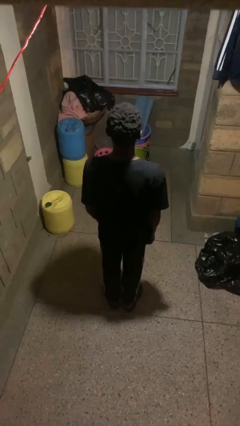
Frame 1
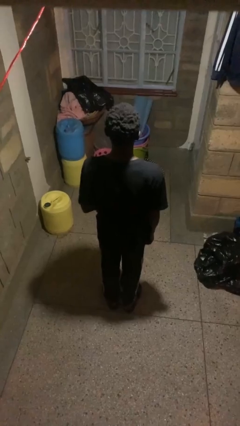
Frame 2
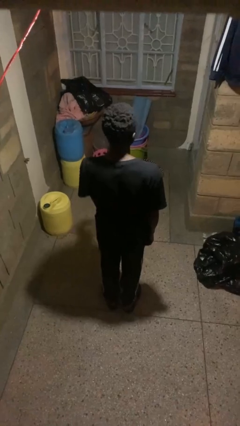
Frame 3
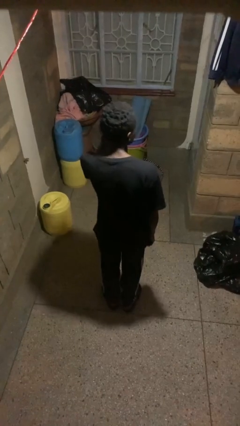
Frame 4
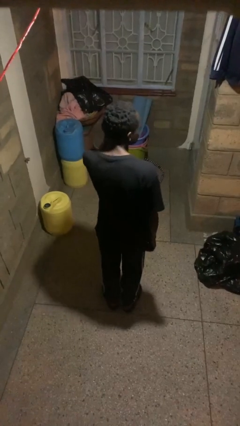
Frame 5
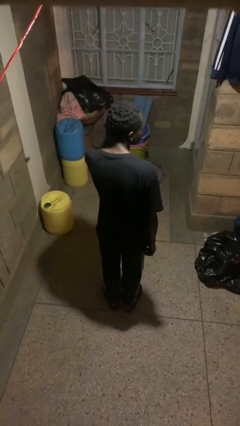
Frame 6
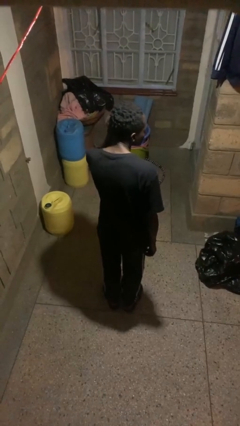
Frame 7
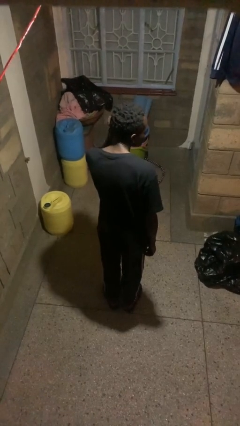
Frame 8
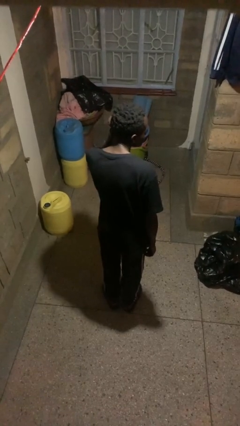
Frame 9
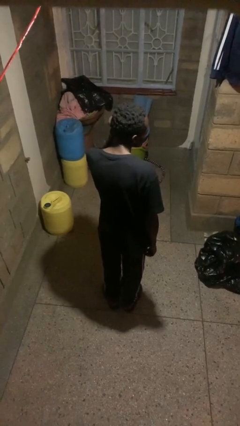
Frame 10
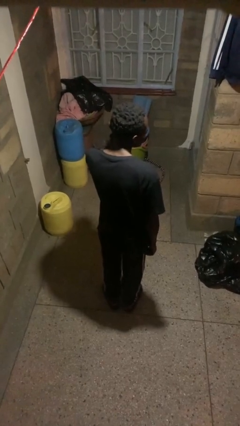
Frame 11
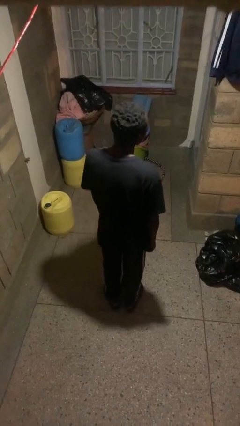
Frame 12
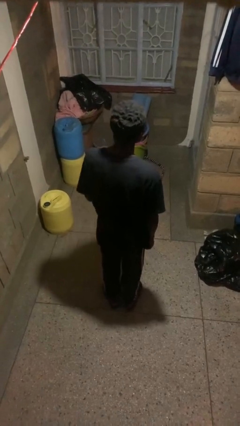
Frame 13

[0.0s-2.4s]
person touches earlobe

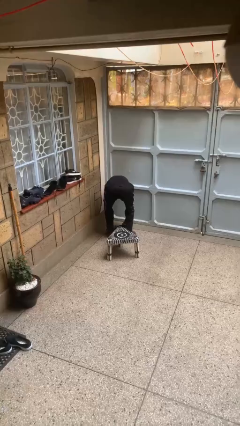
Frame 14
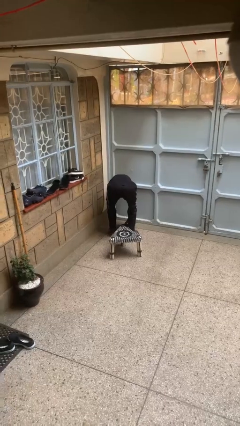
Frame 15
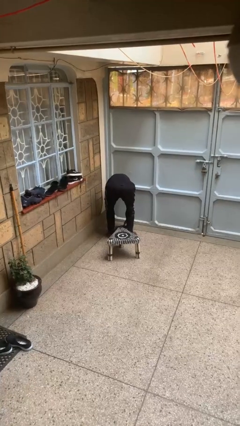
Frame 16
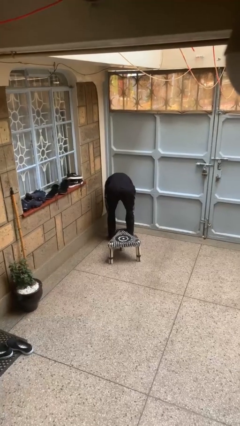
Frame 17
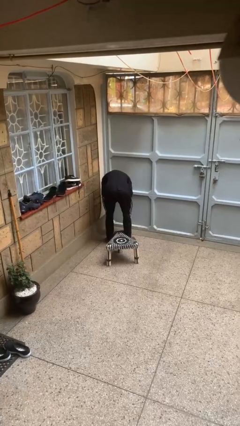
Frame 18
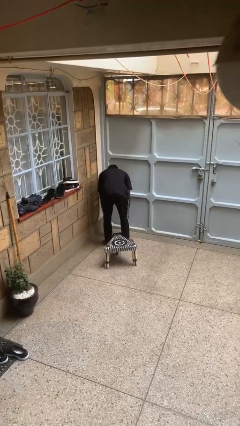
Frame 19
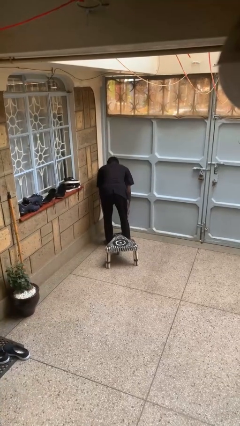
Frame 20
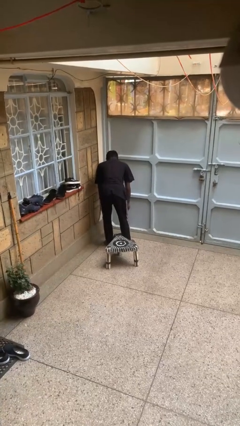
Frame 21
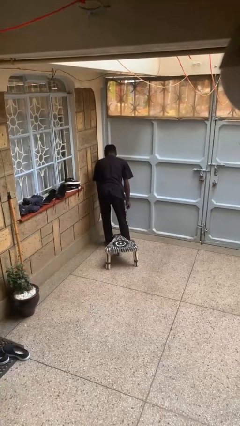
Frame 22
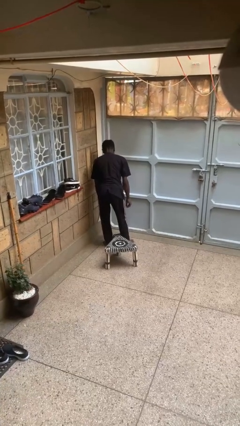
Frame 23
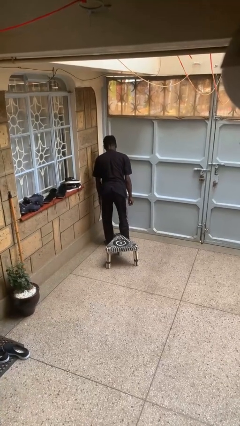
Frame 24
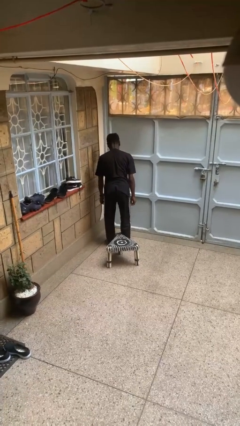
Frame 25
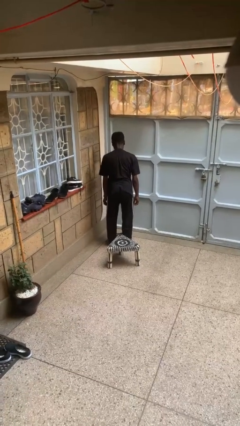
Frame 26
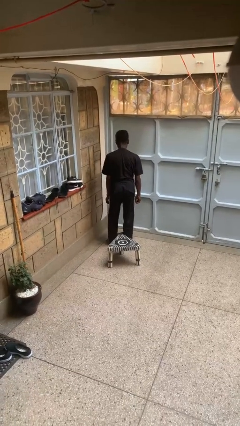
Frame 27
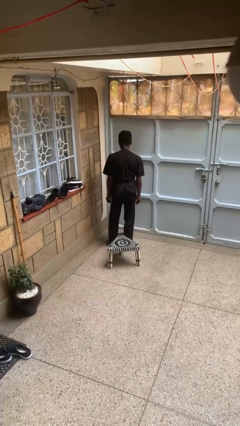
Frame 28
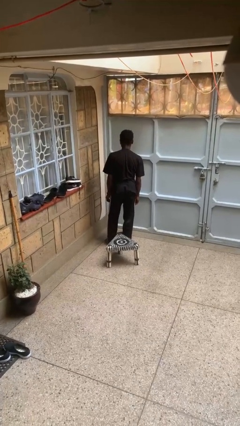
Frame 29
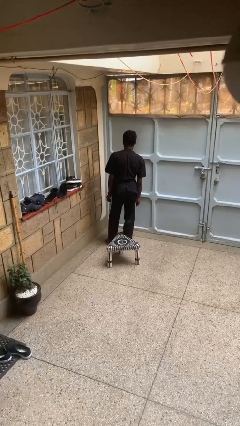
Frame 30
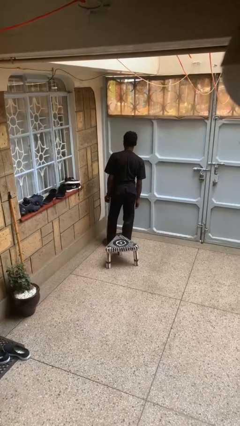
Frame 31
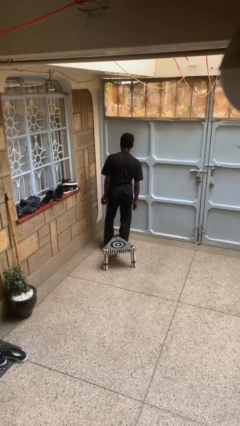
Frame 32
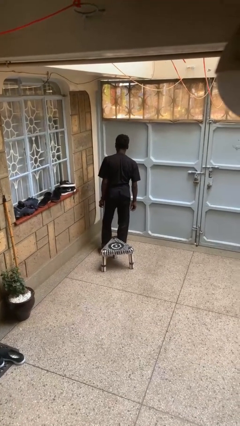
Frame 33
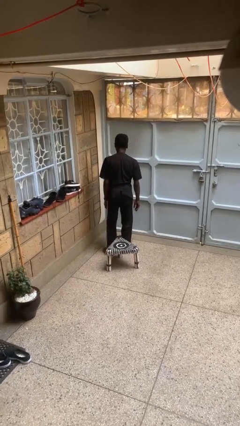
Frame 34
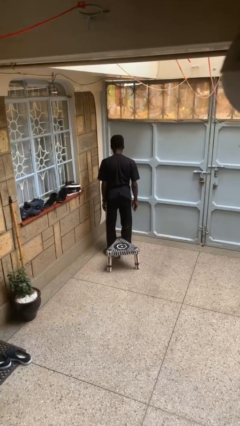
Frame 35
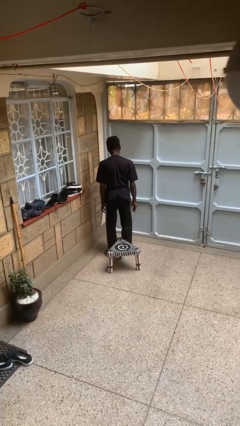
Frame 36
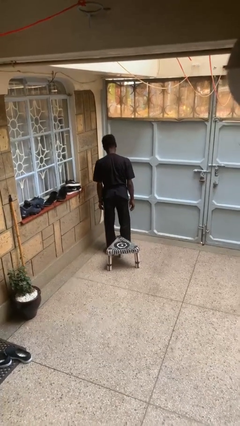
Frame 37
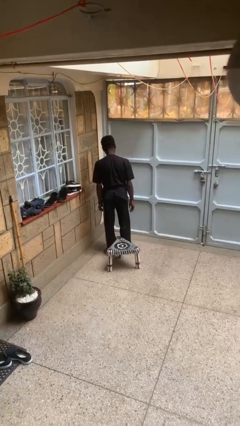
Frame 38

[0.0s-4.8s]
person stands up from floor

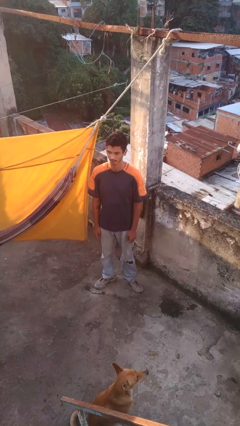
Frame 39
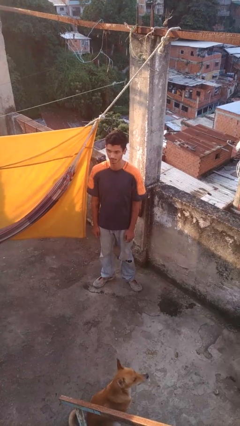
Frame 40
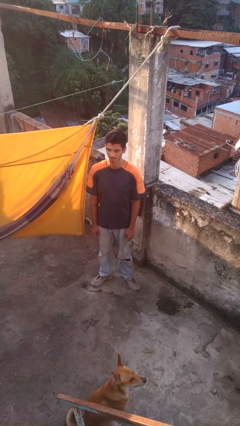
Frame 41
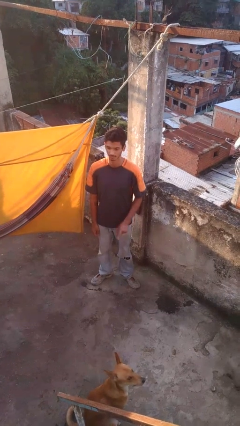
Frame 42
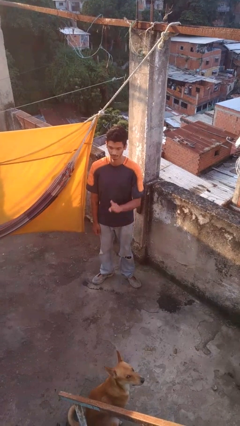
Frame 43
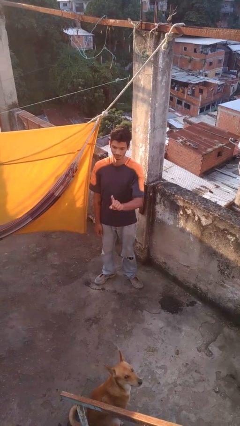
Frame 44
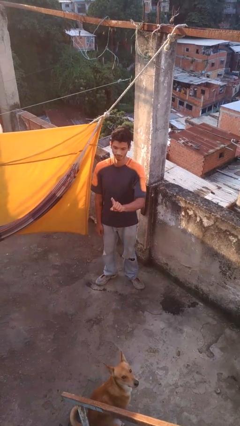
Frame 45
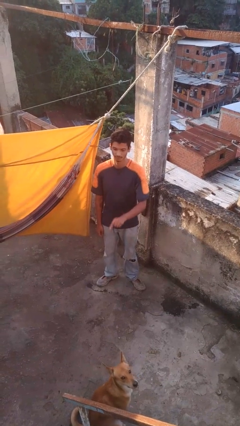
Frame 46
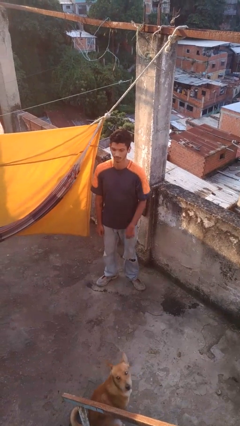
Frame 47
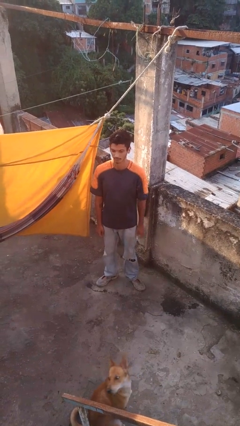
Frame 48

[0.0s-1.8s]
person gestures number one

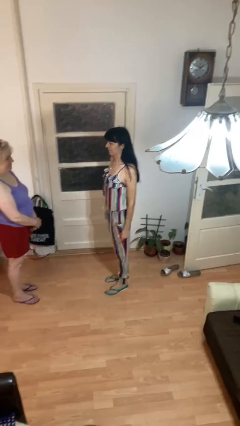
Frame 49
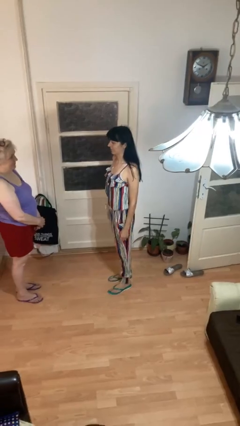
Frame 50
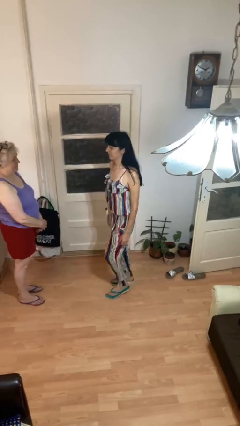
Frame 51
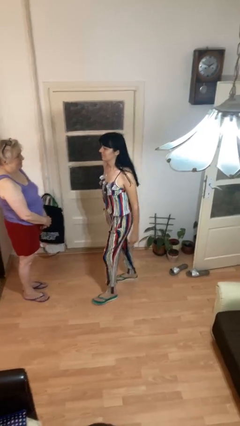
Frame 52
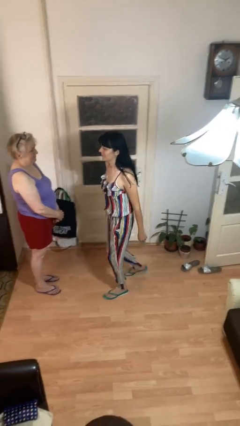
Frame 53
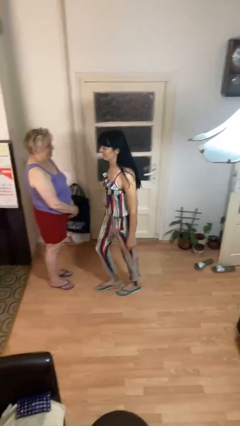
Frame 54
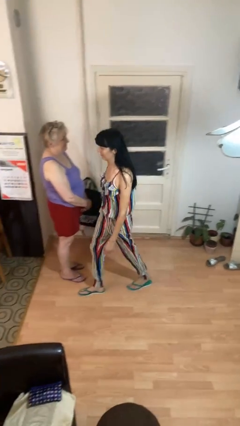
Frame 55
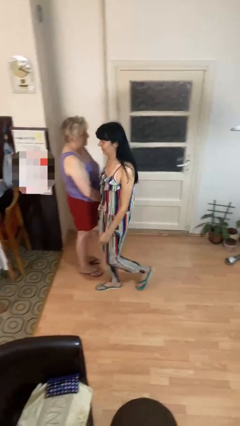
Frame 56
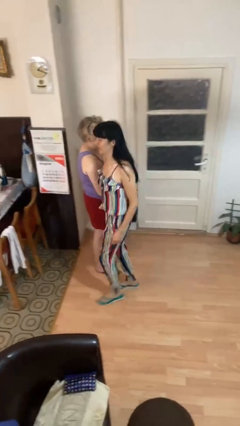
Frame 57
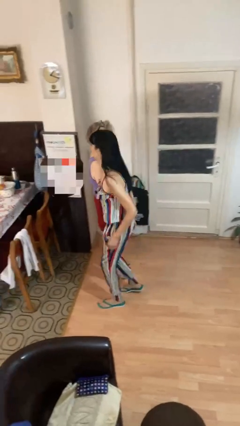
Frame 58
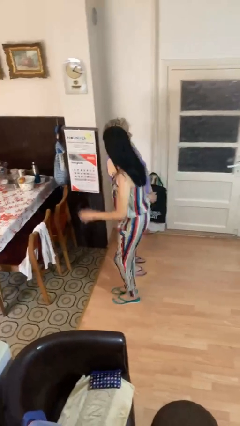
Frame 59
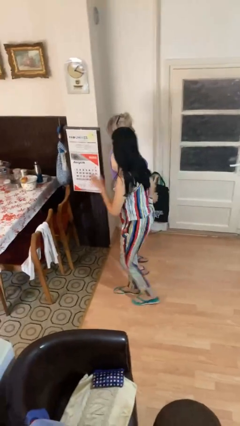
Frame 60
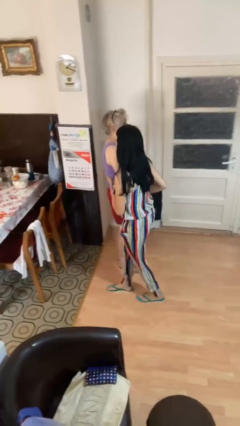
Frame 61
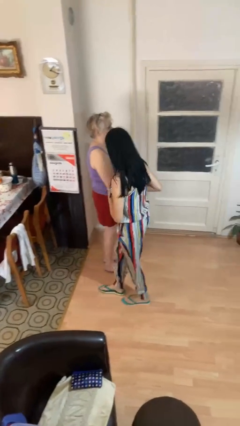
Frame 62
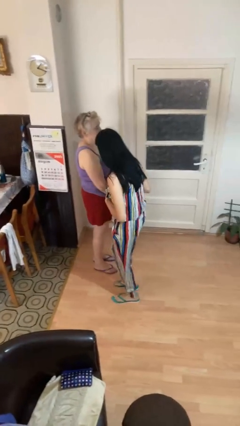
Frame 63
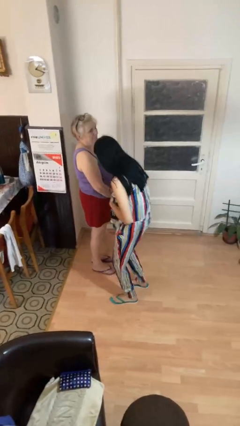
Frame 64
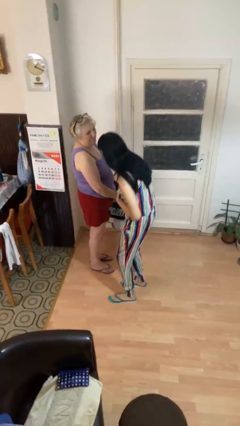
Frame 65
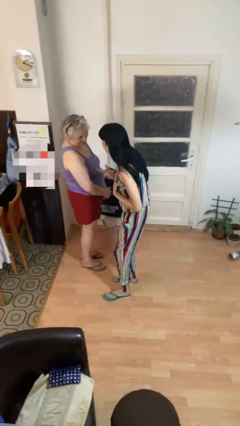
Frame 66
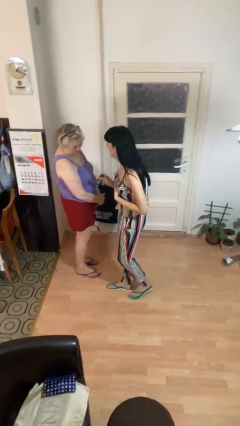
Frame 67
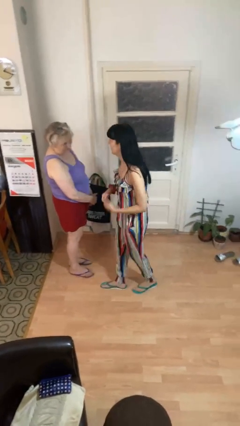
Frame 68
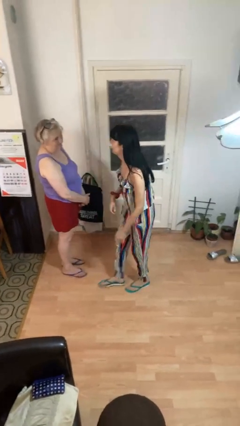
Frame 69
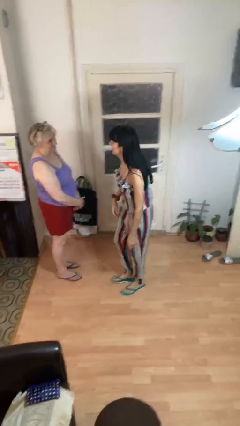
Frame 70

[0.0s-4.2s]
person bumps into person

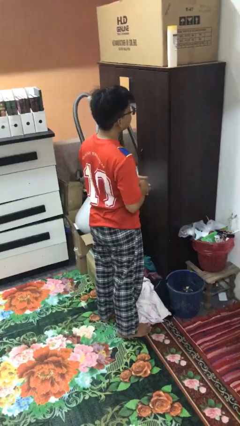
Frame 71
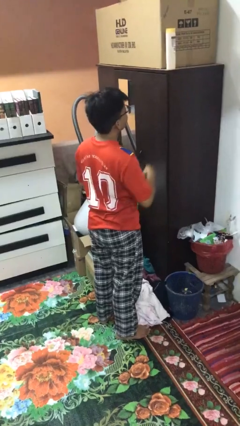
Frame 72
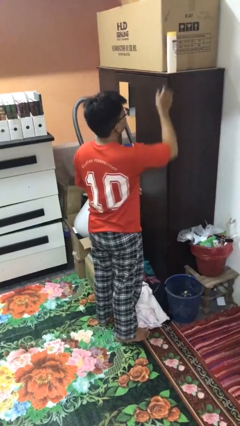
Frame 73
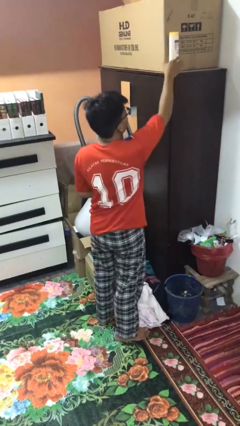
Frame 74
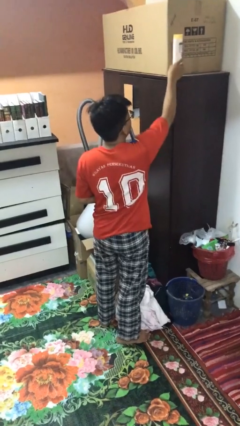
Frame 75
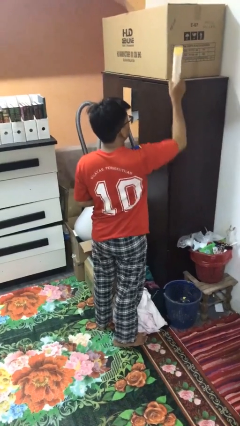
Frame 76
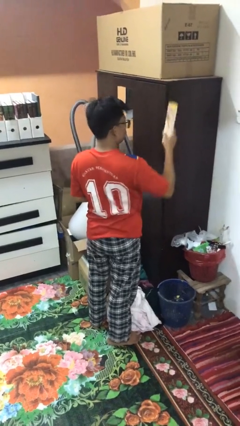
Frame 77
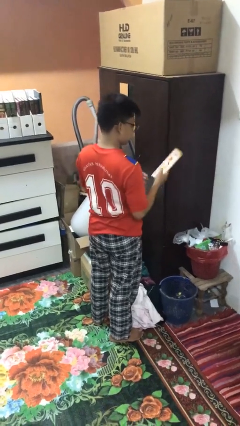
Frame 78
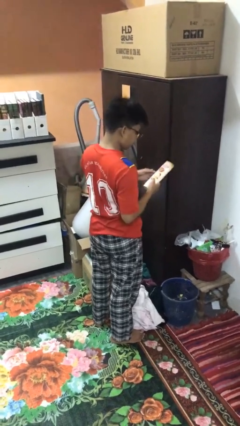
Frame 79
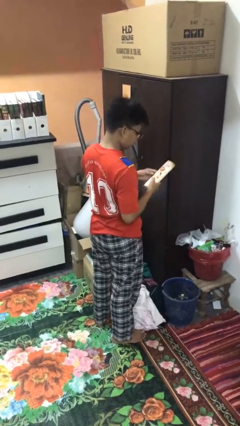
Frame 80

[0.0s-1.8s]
person picks up object from shelf

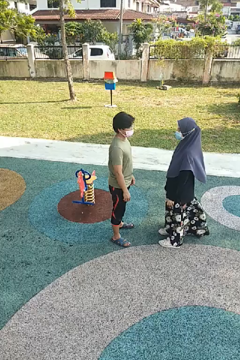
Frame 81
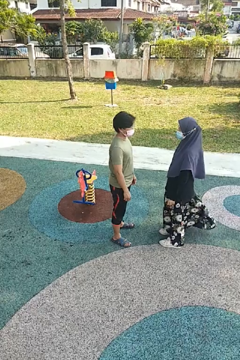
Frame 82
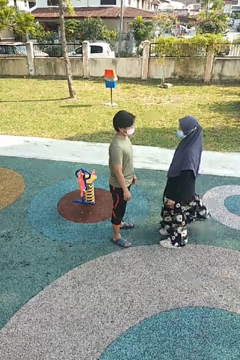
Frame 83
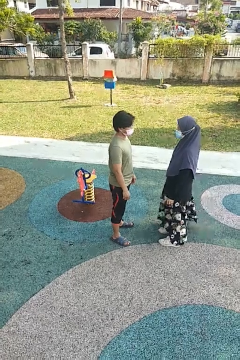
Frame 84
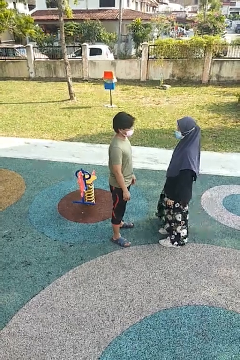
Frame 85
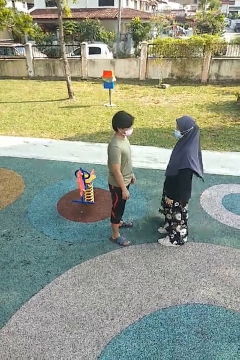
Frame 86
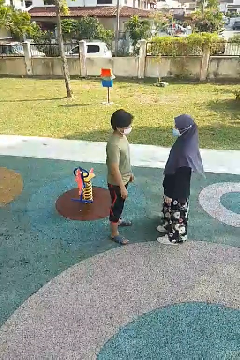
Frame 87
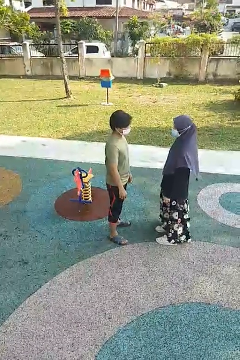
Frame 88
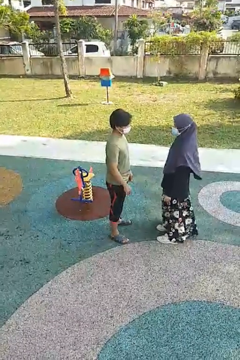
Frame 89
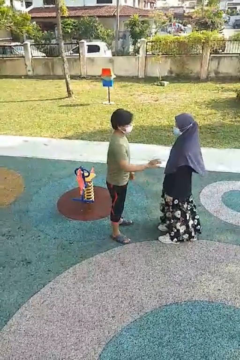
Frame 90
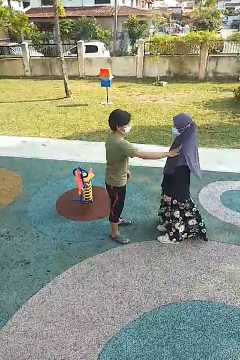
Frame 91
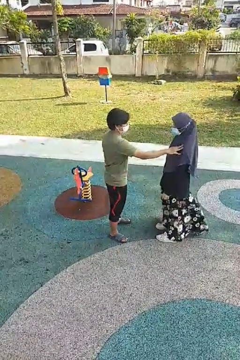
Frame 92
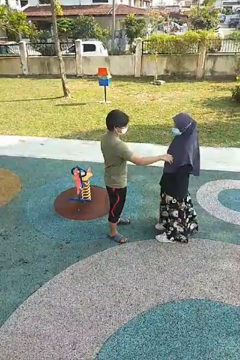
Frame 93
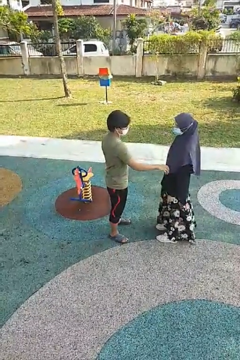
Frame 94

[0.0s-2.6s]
person shoves person

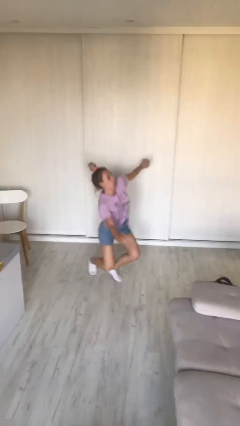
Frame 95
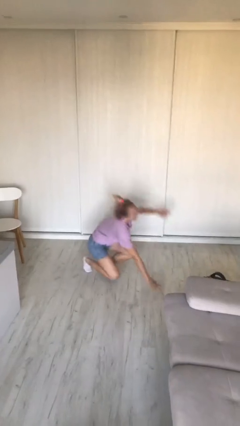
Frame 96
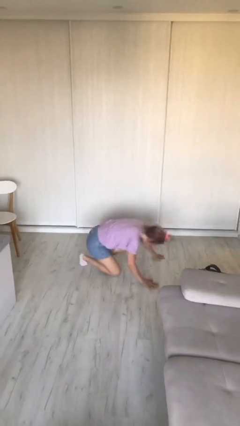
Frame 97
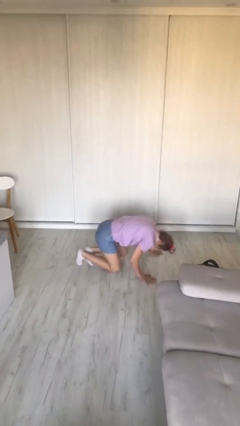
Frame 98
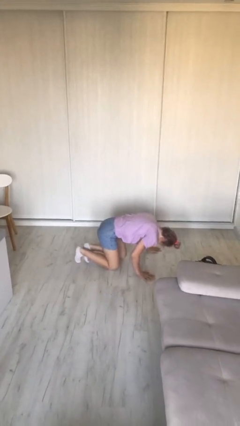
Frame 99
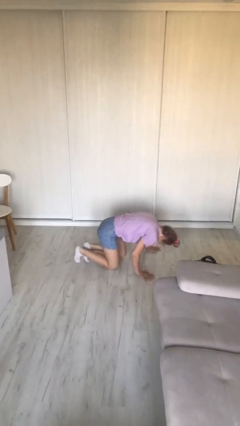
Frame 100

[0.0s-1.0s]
person trips on object on floor
